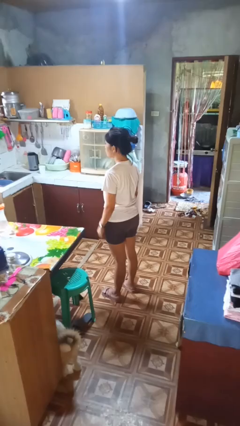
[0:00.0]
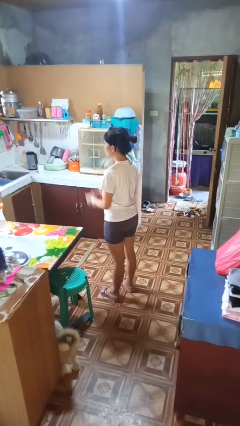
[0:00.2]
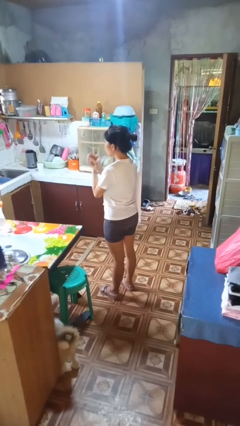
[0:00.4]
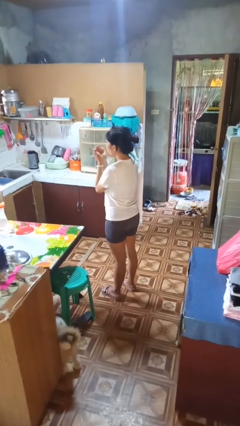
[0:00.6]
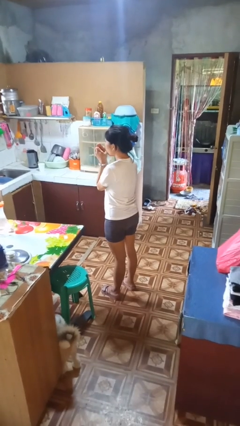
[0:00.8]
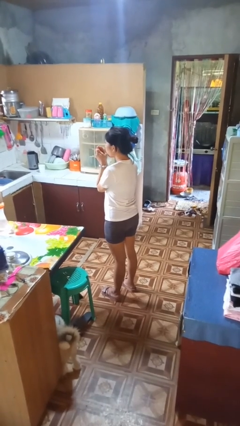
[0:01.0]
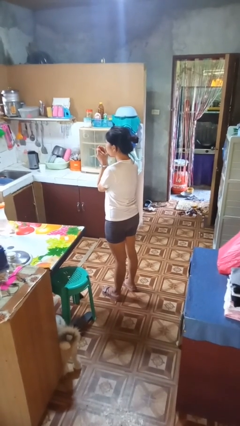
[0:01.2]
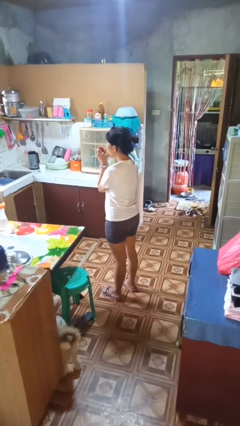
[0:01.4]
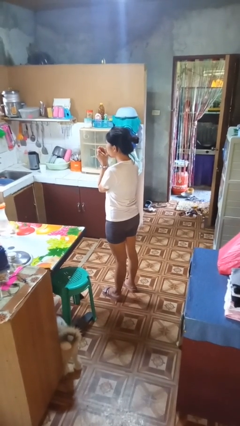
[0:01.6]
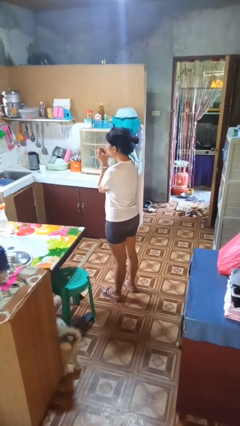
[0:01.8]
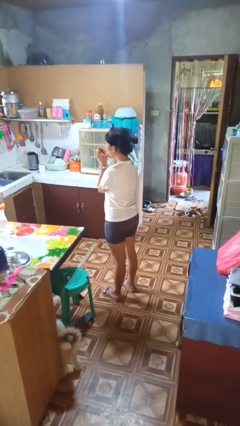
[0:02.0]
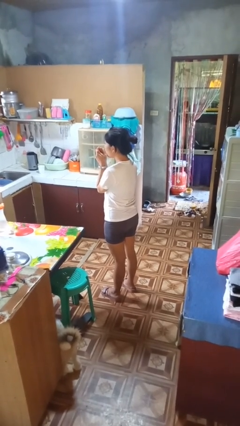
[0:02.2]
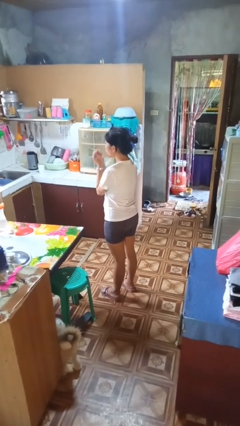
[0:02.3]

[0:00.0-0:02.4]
person blows into hands

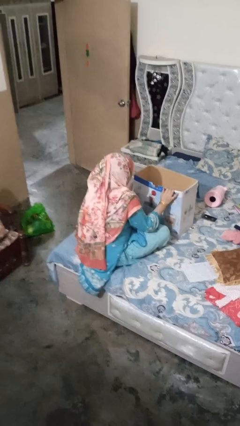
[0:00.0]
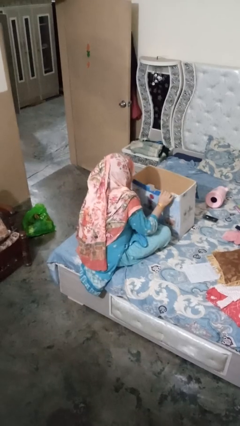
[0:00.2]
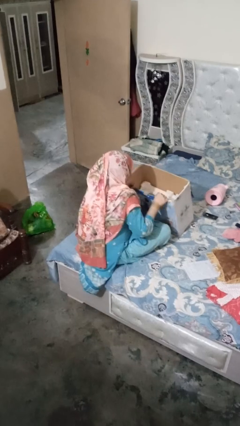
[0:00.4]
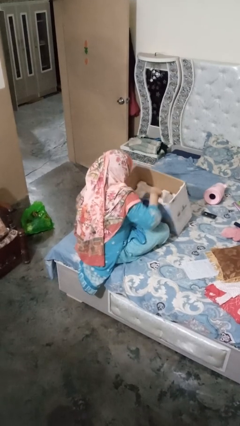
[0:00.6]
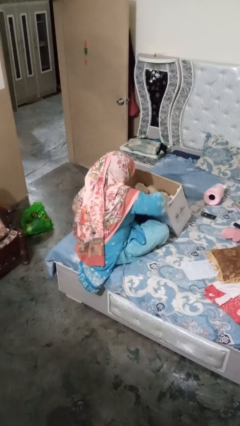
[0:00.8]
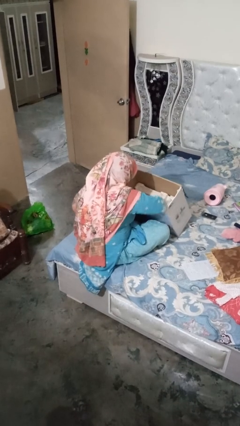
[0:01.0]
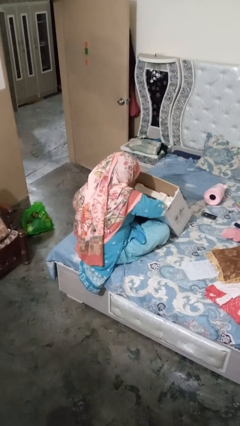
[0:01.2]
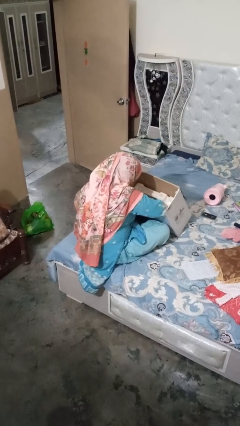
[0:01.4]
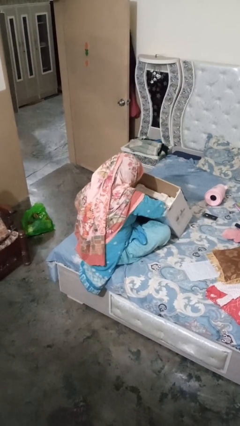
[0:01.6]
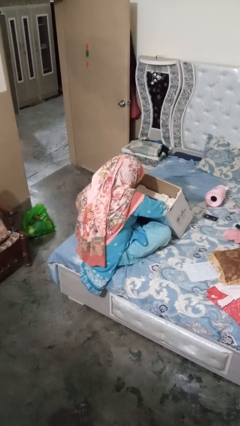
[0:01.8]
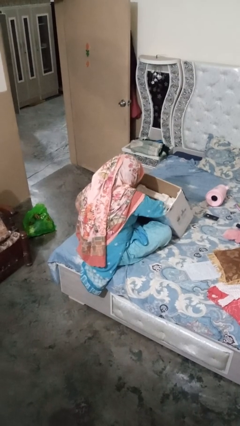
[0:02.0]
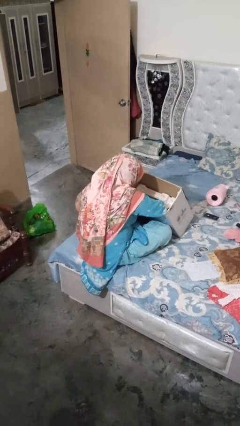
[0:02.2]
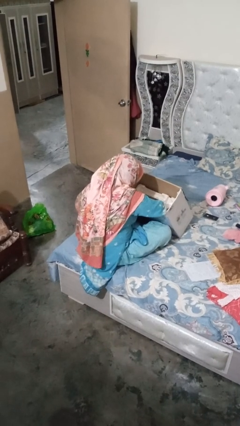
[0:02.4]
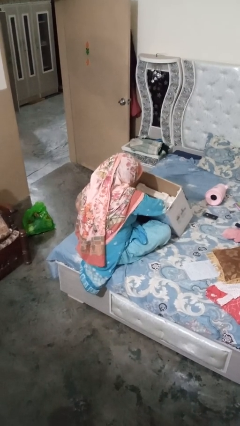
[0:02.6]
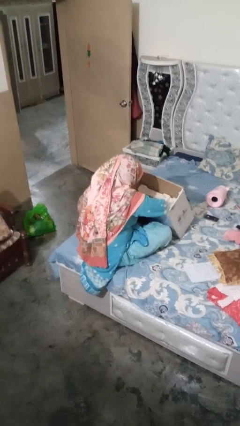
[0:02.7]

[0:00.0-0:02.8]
person searches in box

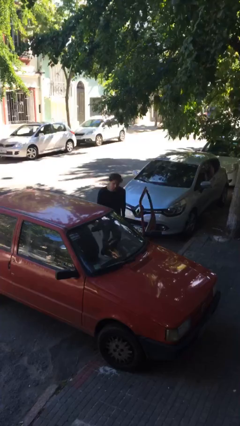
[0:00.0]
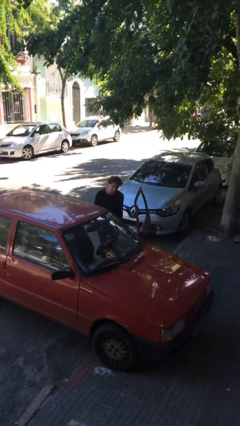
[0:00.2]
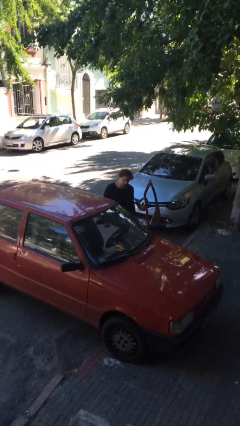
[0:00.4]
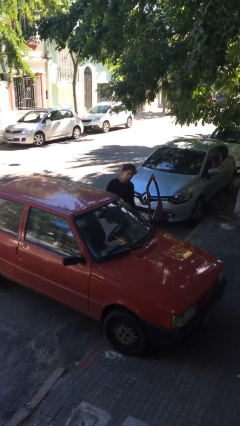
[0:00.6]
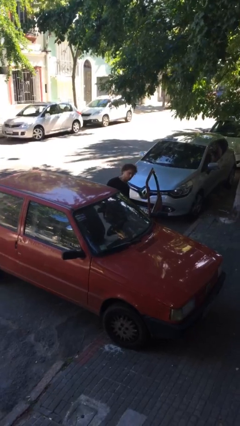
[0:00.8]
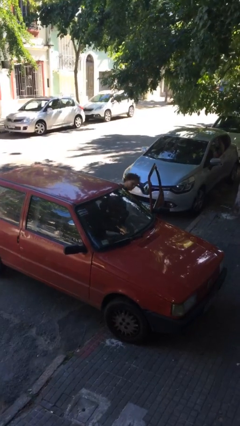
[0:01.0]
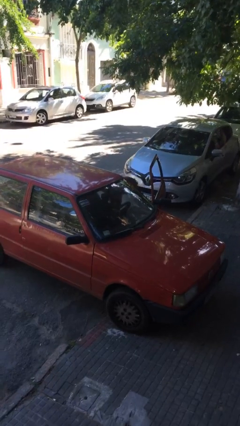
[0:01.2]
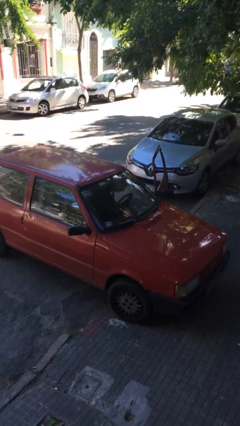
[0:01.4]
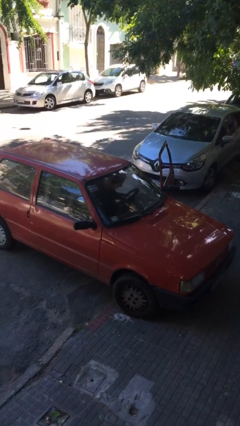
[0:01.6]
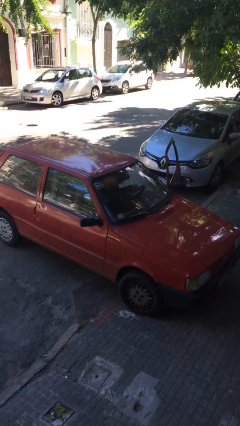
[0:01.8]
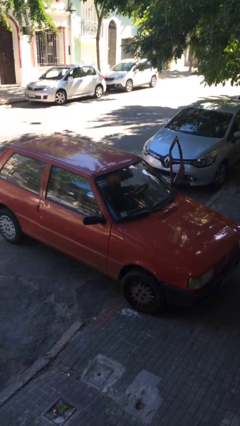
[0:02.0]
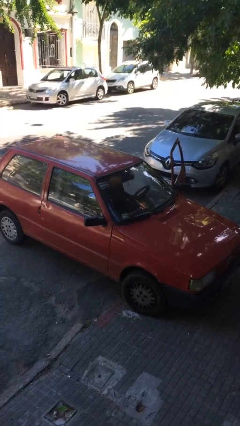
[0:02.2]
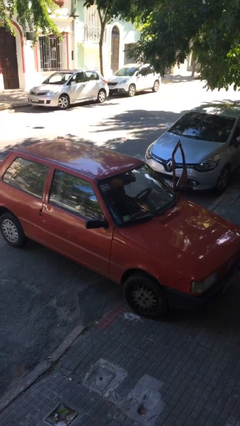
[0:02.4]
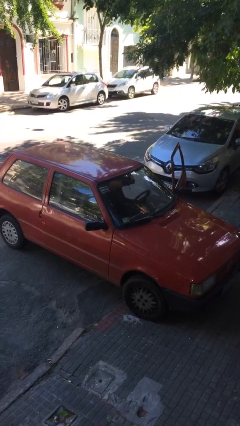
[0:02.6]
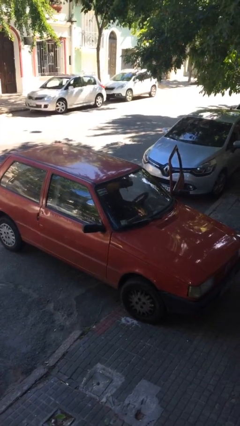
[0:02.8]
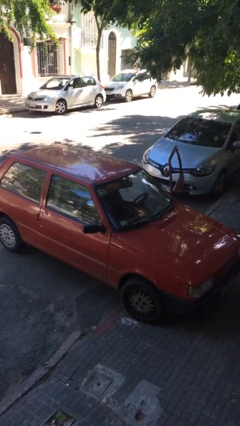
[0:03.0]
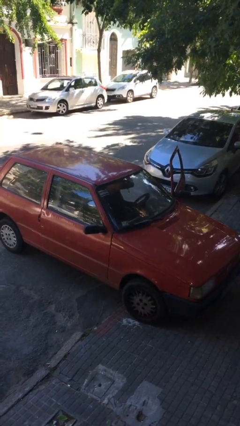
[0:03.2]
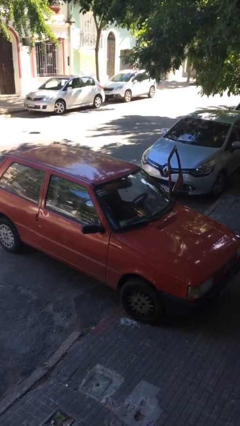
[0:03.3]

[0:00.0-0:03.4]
person enters car

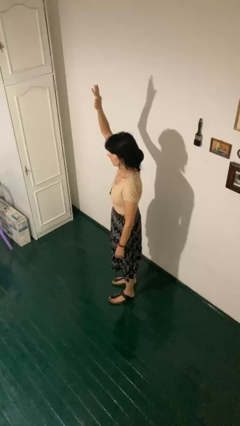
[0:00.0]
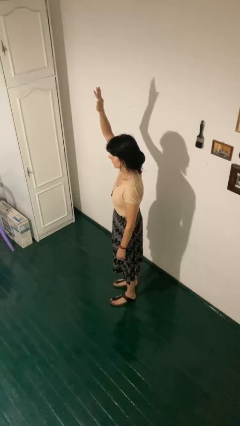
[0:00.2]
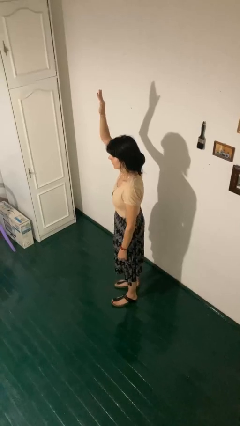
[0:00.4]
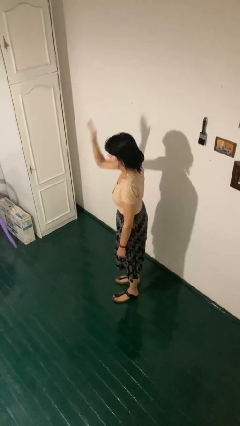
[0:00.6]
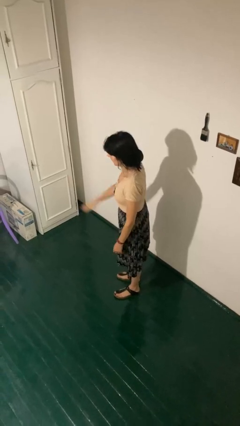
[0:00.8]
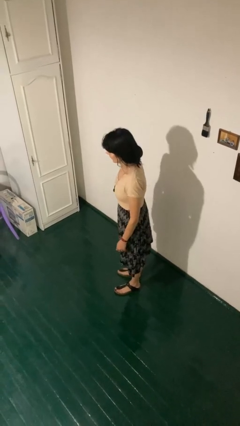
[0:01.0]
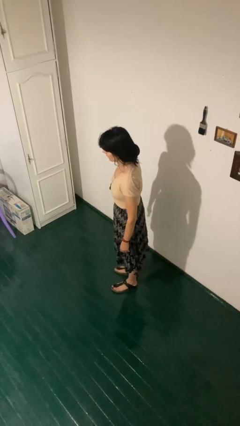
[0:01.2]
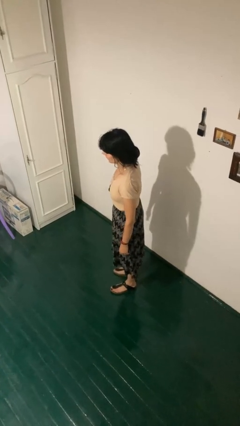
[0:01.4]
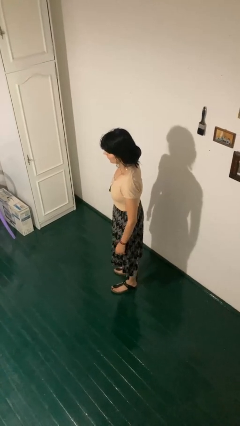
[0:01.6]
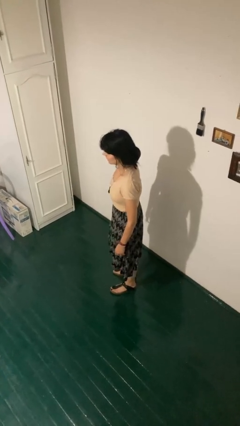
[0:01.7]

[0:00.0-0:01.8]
person gestures swipe down

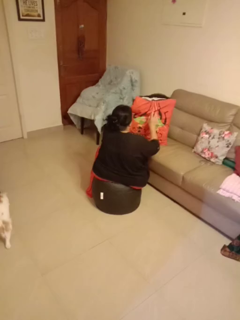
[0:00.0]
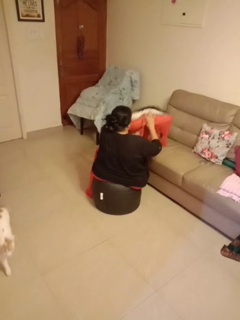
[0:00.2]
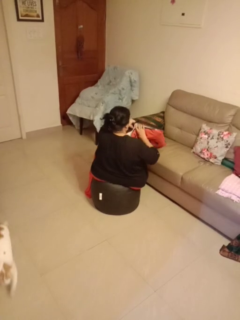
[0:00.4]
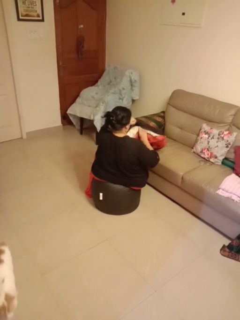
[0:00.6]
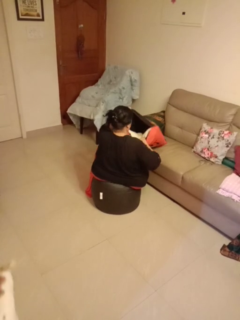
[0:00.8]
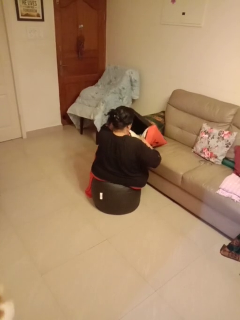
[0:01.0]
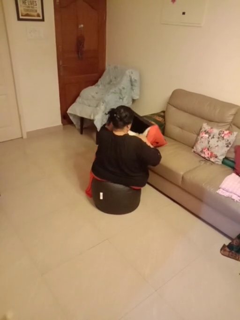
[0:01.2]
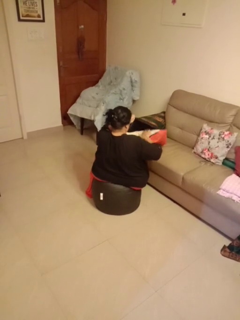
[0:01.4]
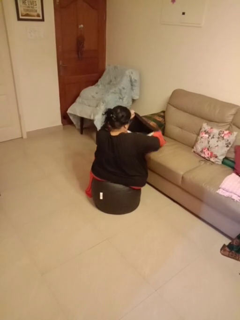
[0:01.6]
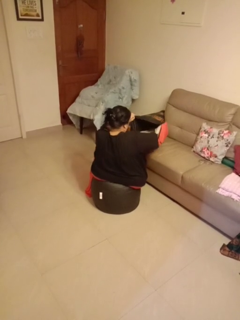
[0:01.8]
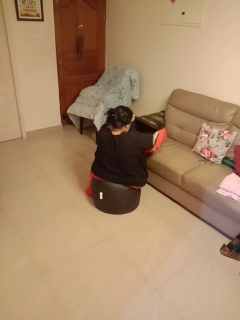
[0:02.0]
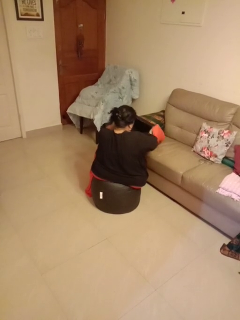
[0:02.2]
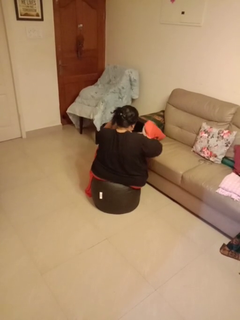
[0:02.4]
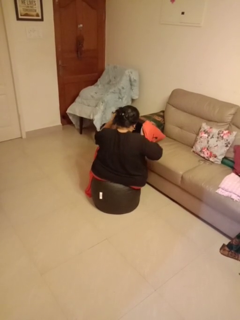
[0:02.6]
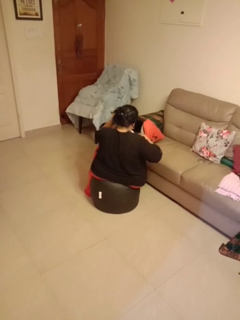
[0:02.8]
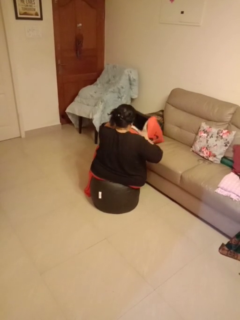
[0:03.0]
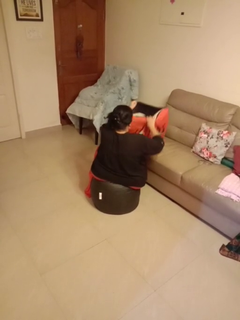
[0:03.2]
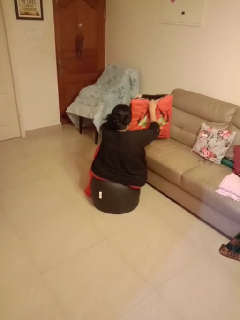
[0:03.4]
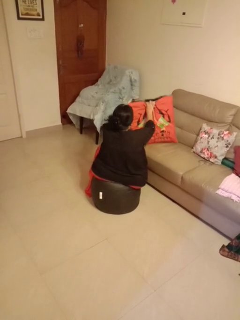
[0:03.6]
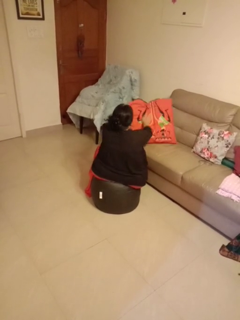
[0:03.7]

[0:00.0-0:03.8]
person searches in couch

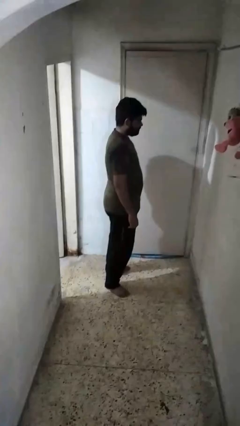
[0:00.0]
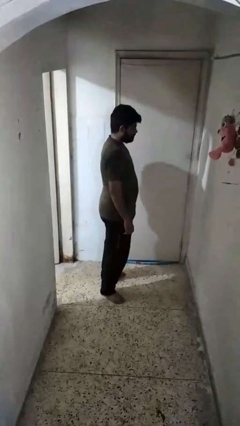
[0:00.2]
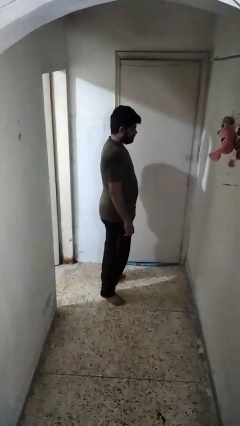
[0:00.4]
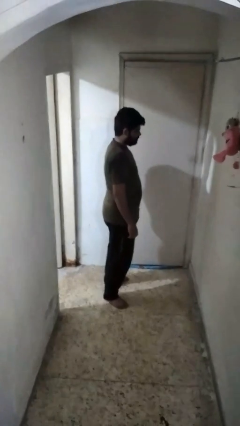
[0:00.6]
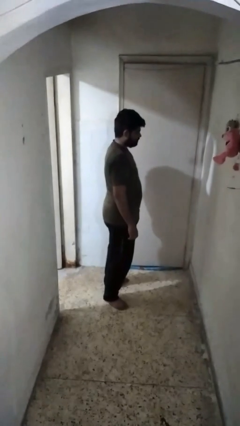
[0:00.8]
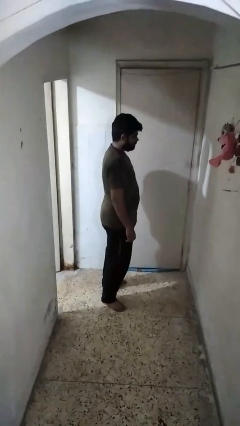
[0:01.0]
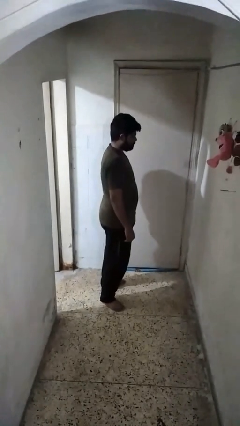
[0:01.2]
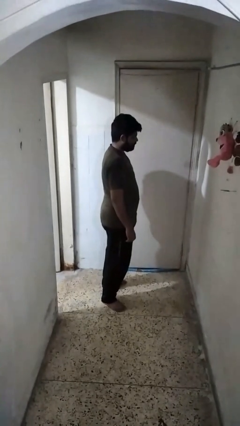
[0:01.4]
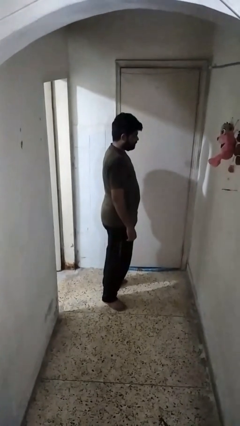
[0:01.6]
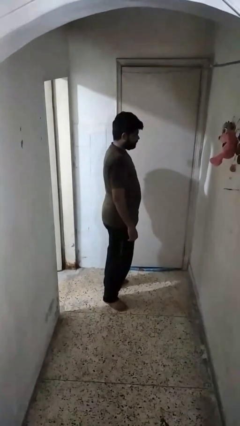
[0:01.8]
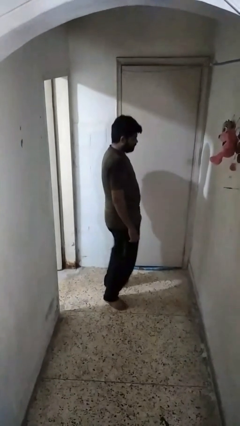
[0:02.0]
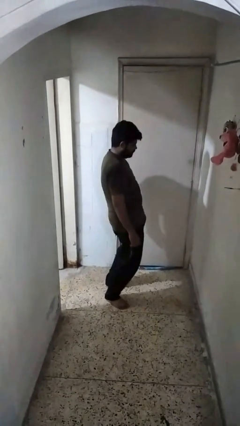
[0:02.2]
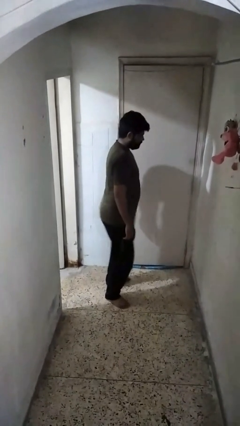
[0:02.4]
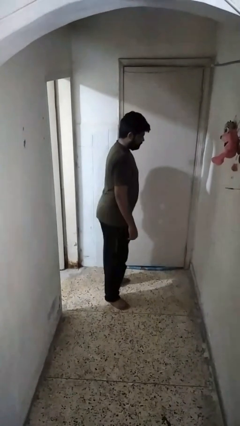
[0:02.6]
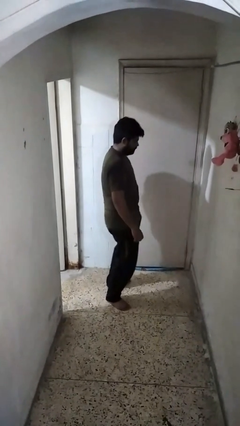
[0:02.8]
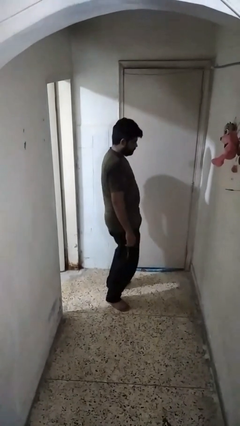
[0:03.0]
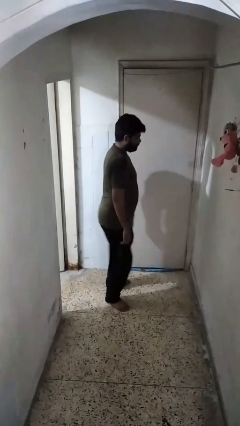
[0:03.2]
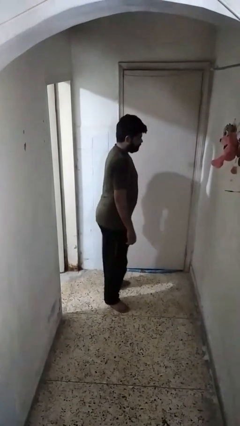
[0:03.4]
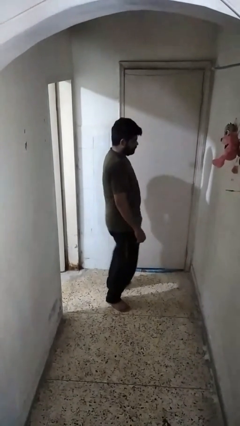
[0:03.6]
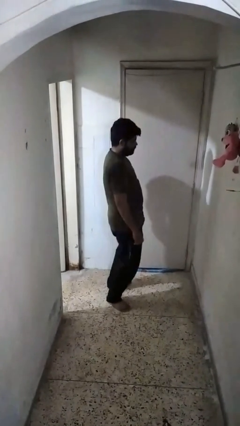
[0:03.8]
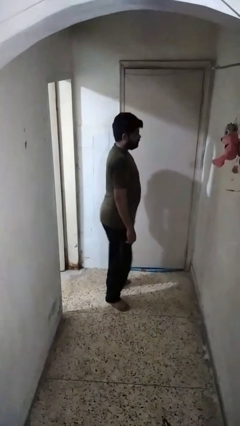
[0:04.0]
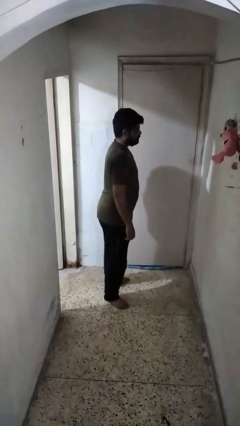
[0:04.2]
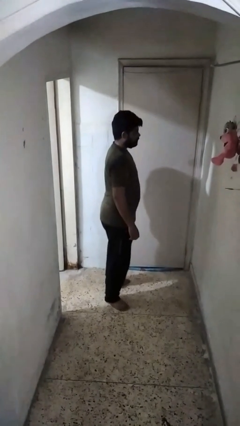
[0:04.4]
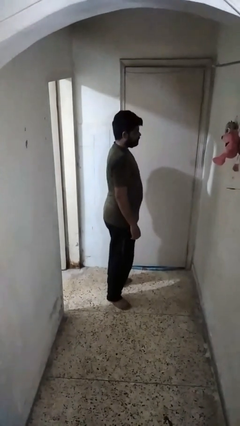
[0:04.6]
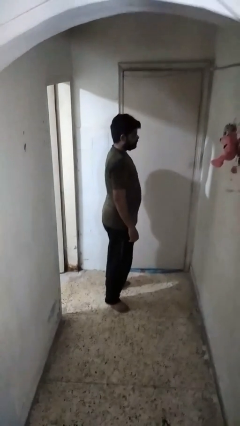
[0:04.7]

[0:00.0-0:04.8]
person wiggles hips
